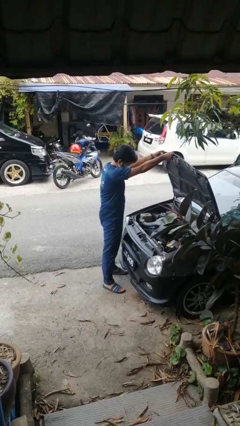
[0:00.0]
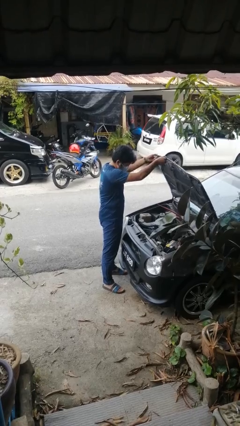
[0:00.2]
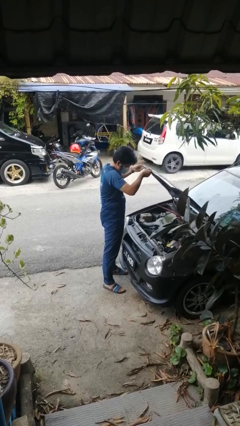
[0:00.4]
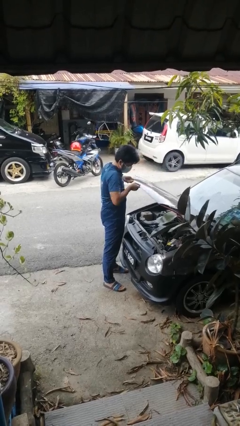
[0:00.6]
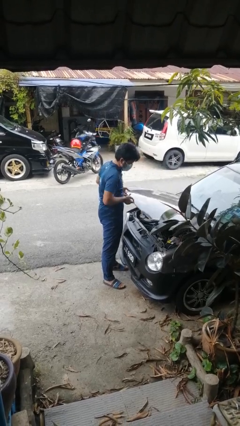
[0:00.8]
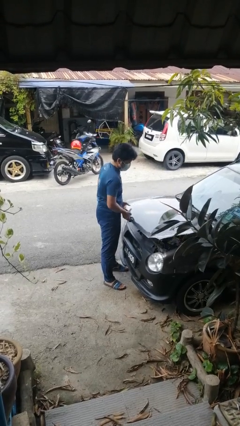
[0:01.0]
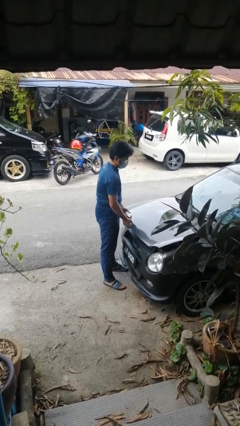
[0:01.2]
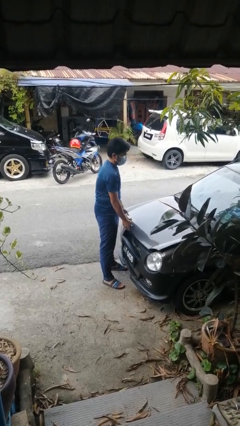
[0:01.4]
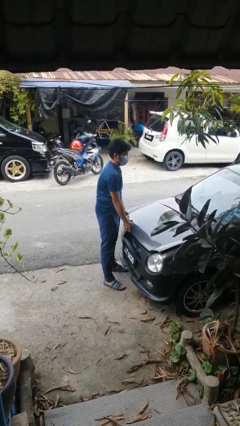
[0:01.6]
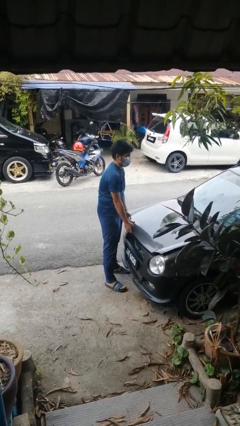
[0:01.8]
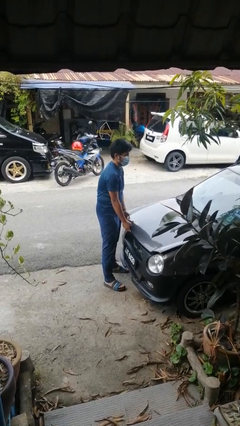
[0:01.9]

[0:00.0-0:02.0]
person closes car hood

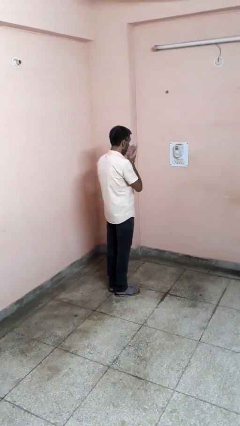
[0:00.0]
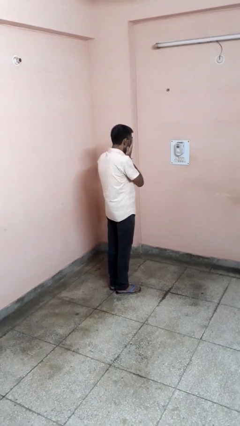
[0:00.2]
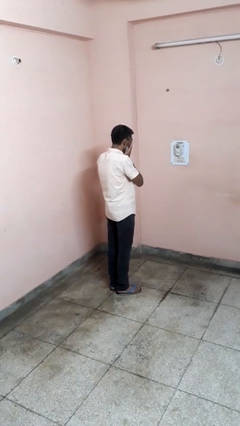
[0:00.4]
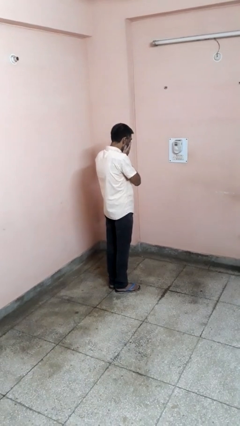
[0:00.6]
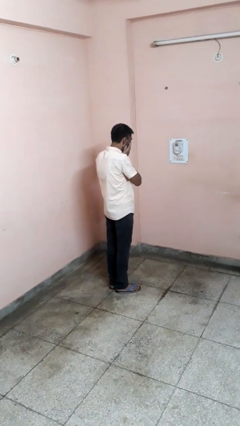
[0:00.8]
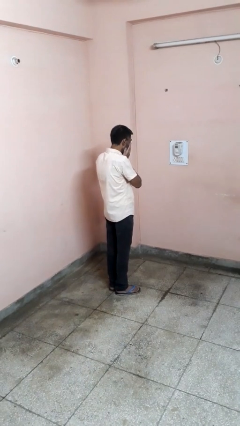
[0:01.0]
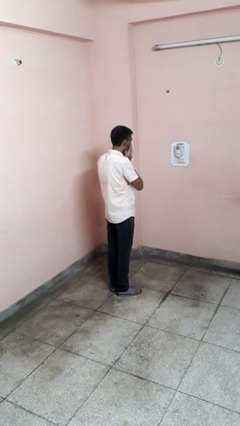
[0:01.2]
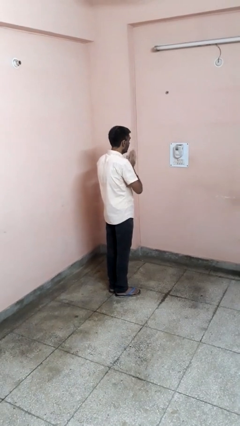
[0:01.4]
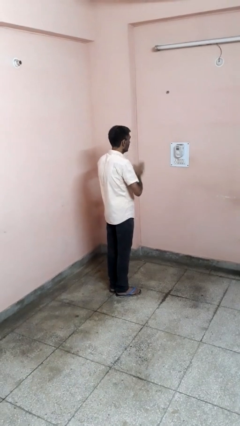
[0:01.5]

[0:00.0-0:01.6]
person sneezes into hand

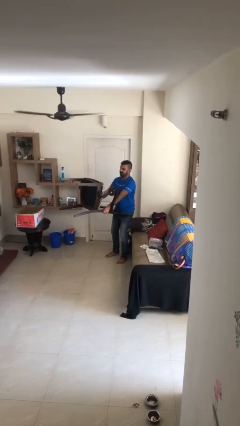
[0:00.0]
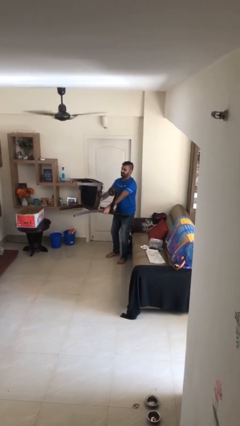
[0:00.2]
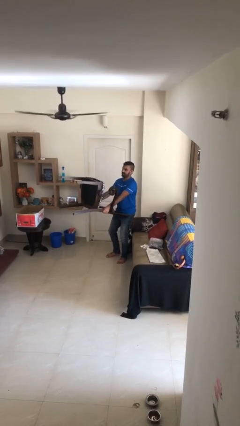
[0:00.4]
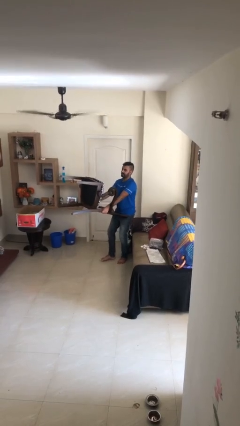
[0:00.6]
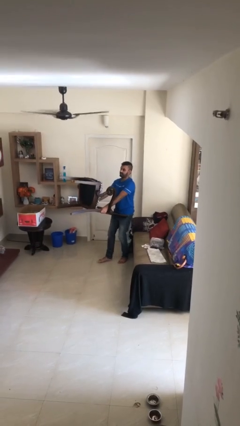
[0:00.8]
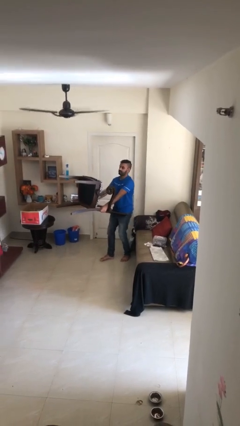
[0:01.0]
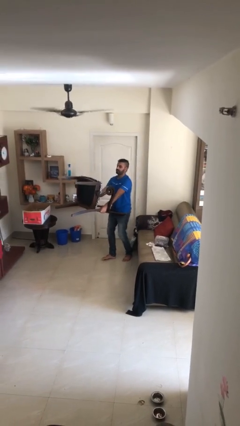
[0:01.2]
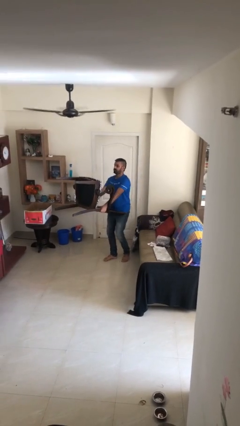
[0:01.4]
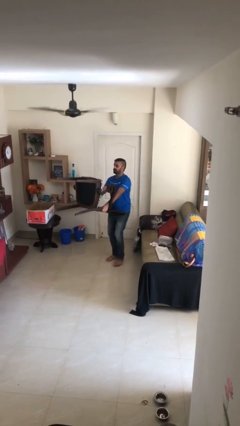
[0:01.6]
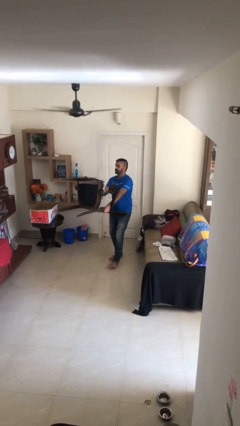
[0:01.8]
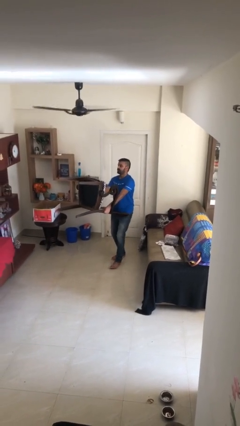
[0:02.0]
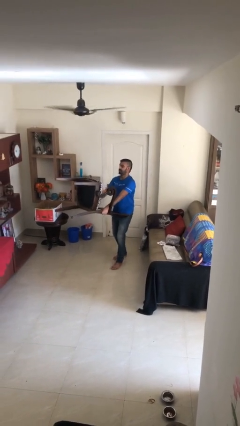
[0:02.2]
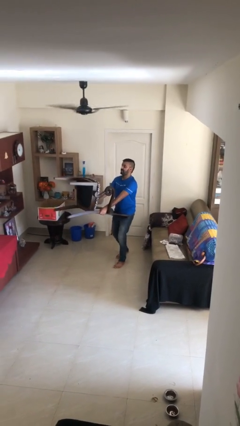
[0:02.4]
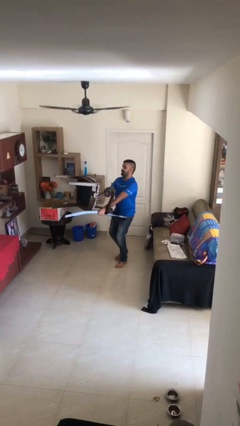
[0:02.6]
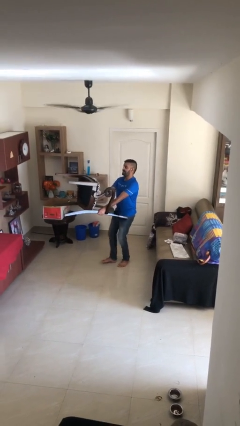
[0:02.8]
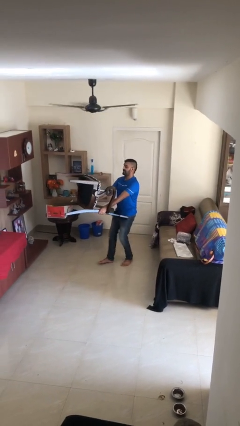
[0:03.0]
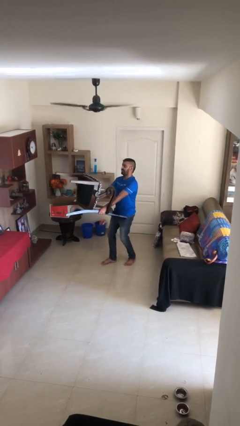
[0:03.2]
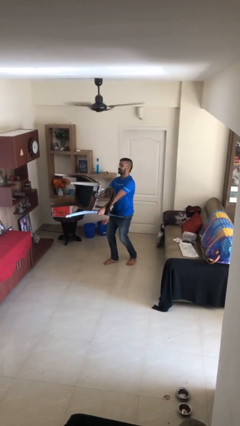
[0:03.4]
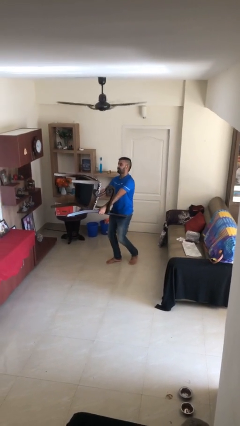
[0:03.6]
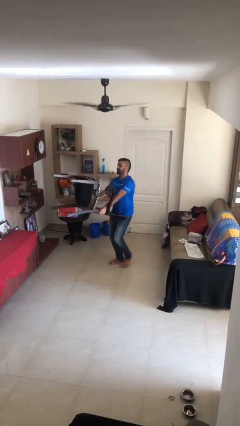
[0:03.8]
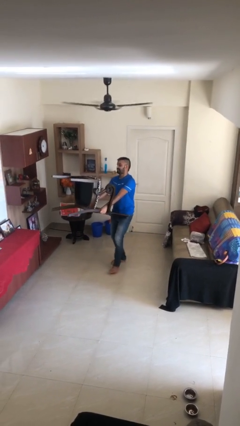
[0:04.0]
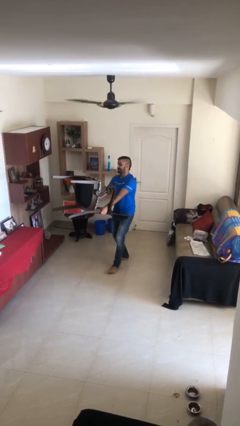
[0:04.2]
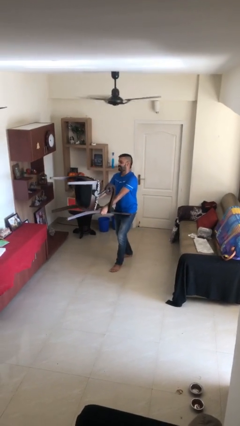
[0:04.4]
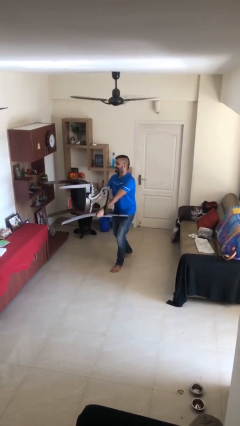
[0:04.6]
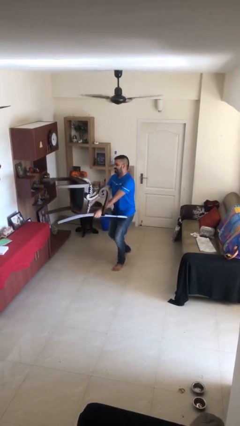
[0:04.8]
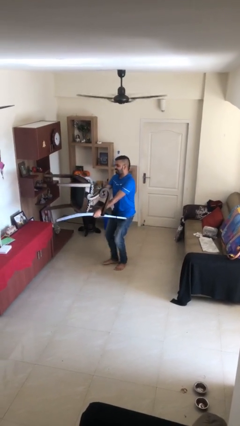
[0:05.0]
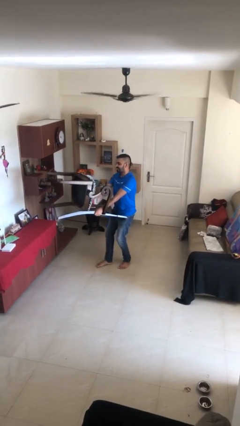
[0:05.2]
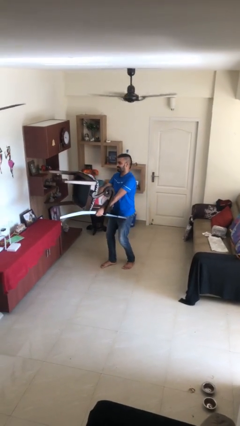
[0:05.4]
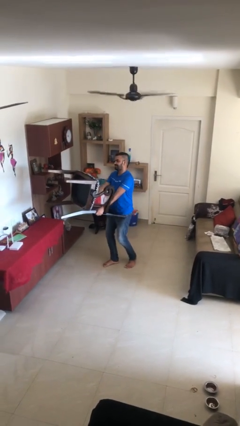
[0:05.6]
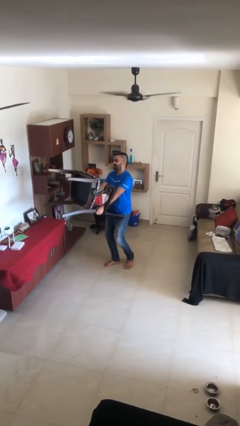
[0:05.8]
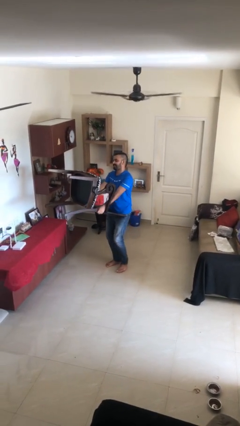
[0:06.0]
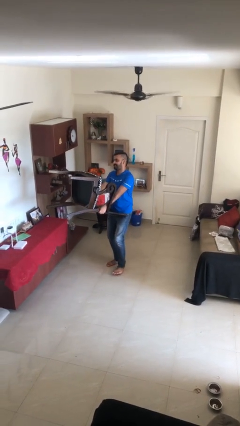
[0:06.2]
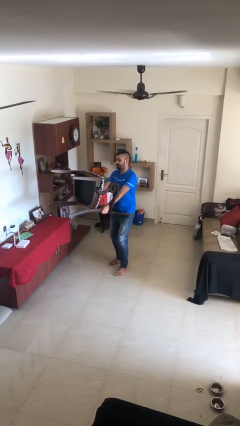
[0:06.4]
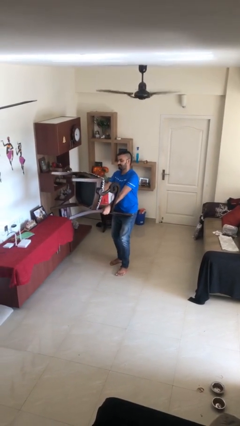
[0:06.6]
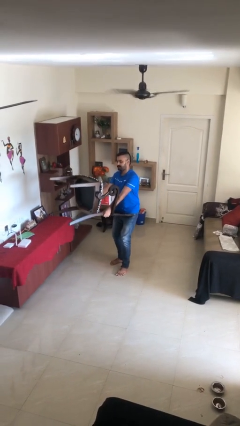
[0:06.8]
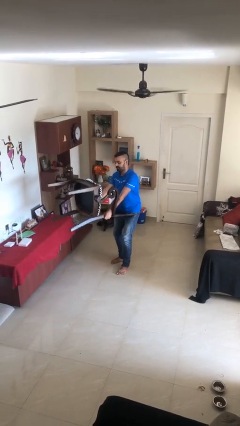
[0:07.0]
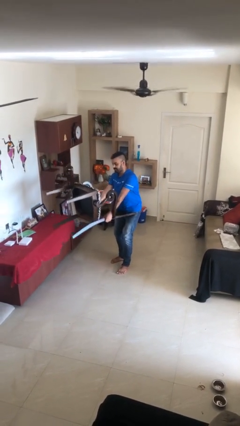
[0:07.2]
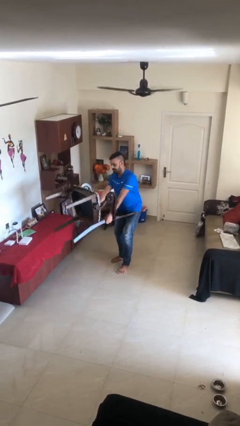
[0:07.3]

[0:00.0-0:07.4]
person carries heavy object

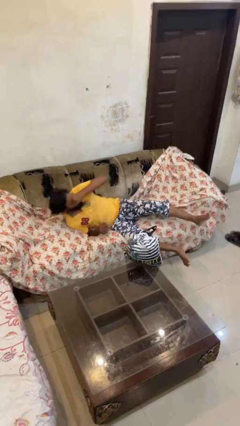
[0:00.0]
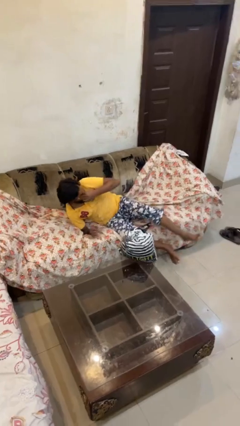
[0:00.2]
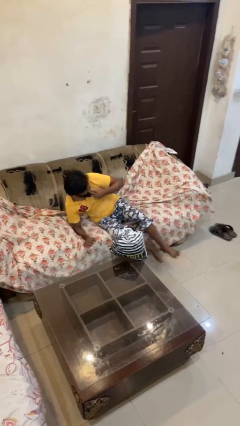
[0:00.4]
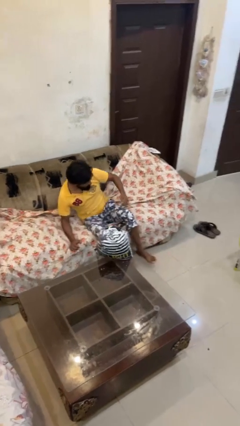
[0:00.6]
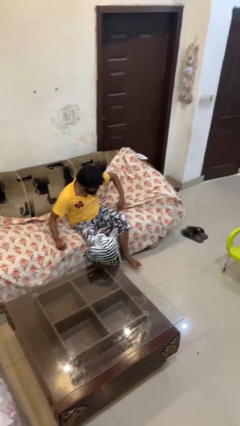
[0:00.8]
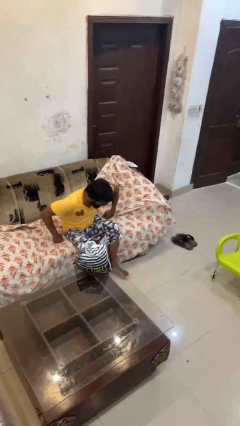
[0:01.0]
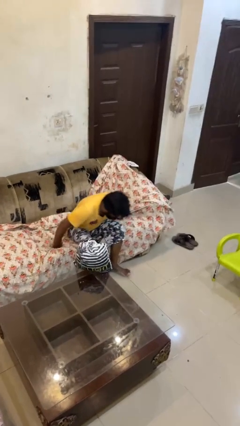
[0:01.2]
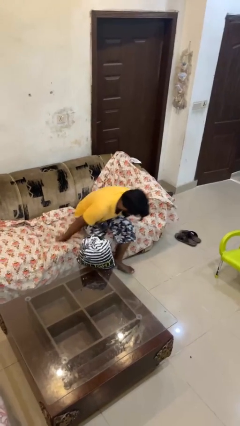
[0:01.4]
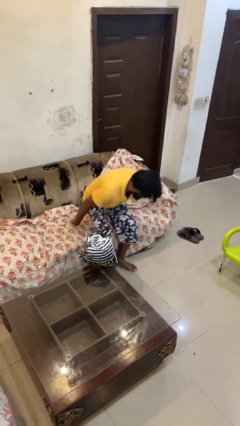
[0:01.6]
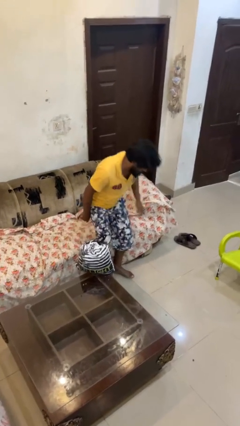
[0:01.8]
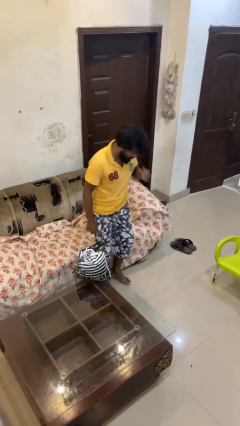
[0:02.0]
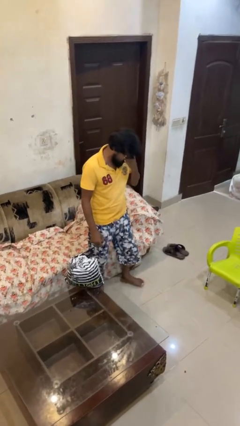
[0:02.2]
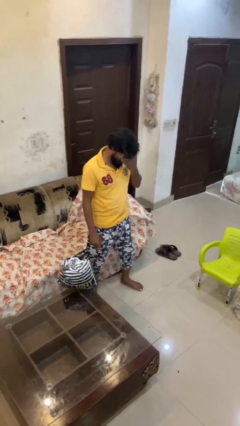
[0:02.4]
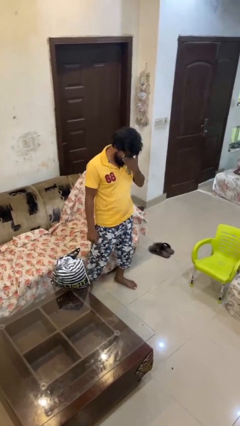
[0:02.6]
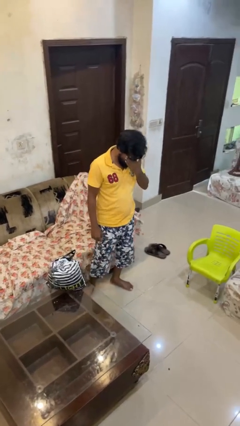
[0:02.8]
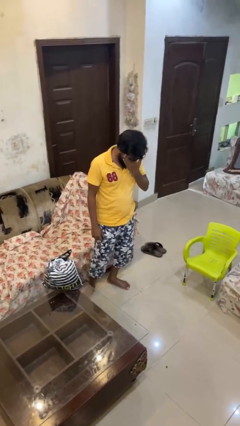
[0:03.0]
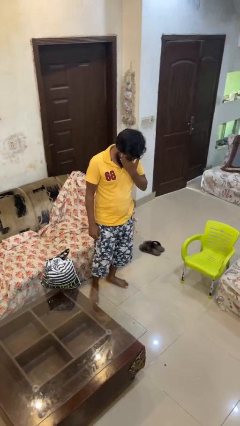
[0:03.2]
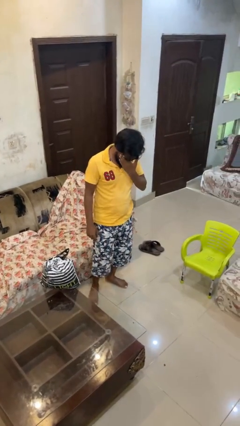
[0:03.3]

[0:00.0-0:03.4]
person stands up

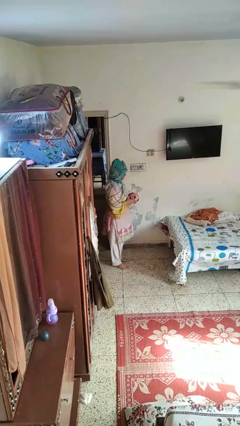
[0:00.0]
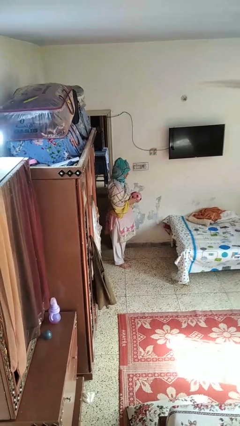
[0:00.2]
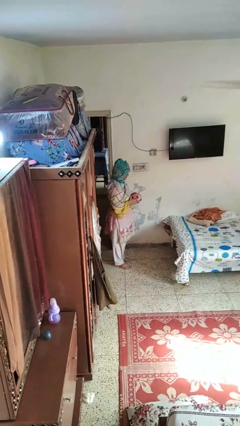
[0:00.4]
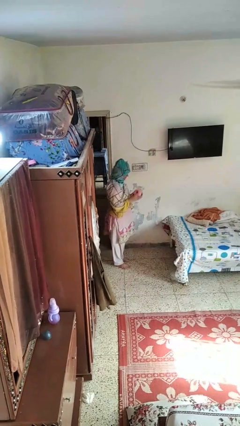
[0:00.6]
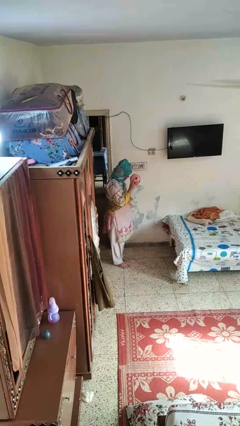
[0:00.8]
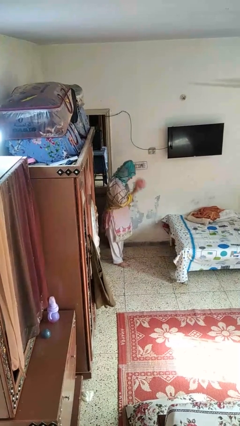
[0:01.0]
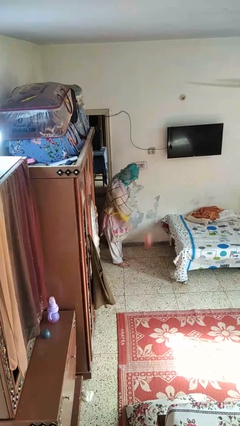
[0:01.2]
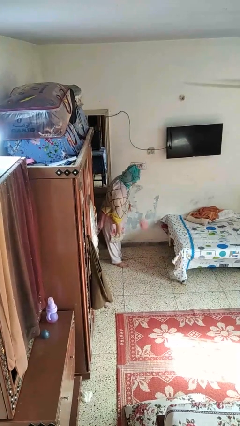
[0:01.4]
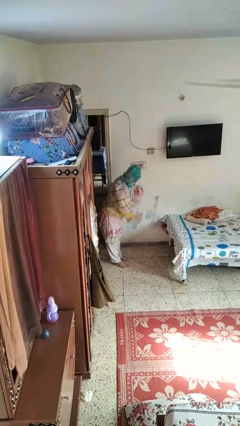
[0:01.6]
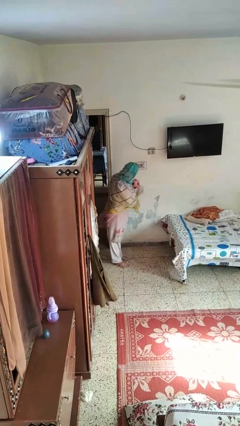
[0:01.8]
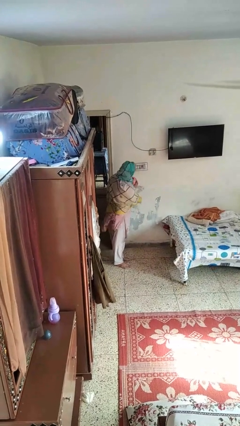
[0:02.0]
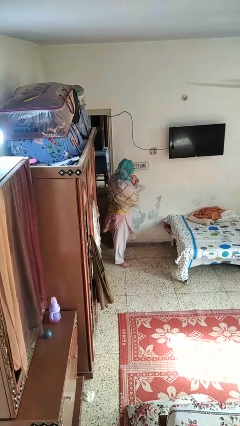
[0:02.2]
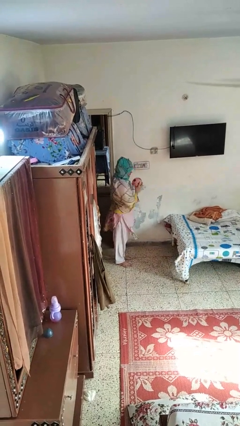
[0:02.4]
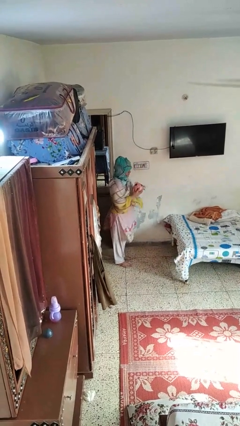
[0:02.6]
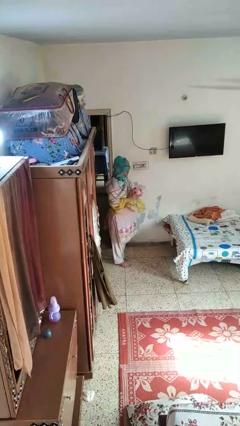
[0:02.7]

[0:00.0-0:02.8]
person bounces ball on floor

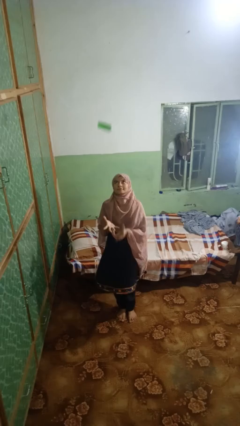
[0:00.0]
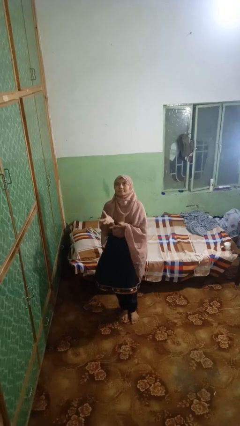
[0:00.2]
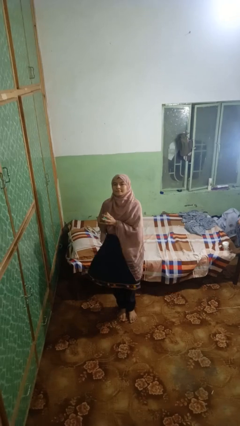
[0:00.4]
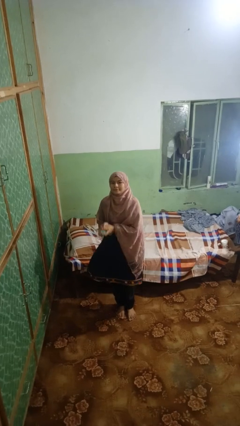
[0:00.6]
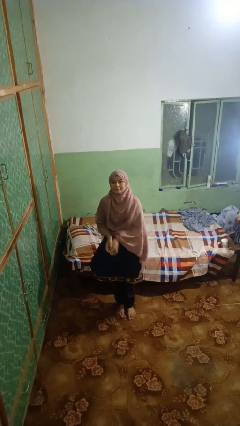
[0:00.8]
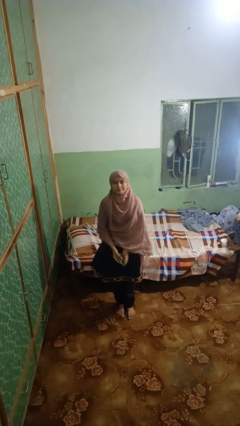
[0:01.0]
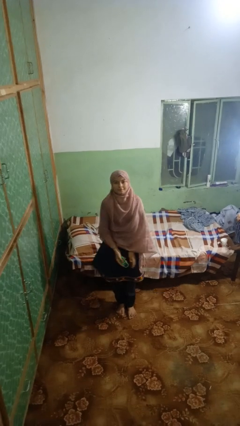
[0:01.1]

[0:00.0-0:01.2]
person picks up object from floor
